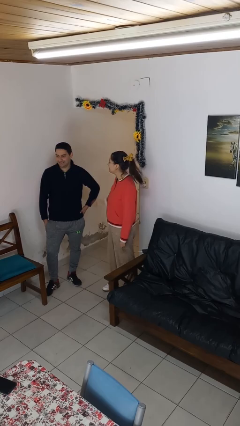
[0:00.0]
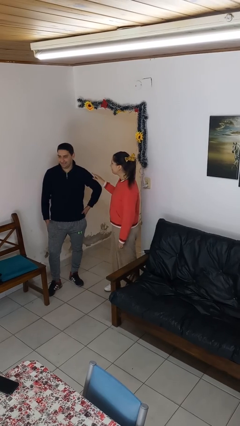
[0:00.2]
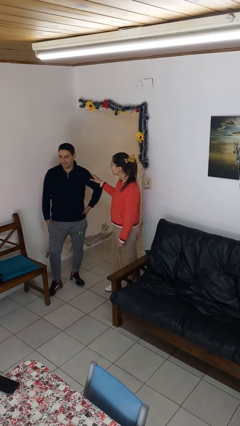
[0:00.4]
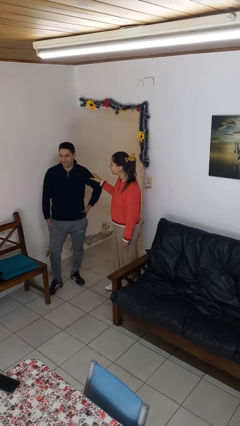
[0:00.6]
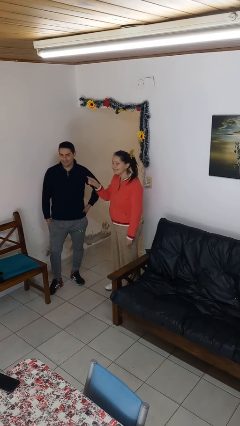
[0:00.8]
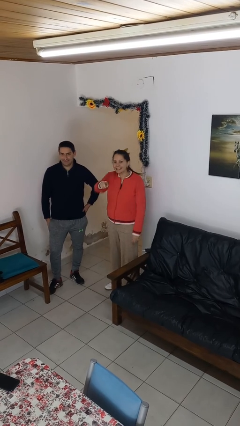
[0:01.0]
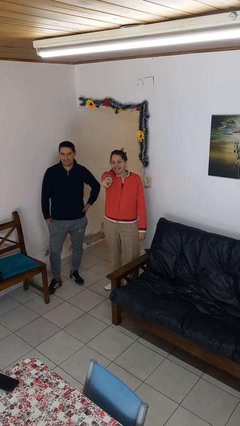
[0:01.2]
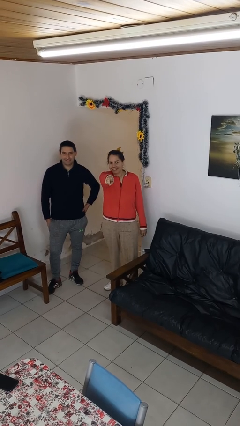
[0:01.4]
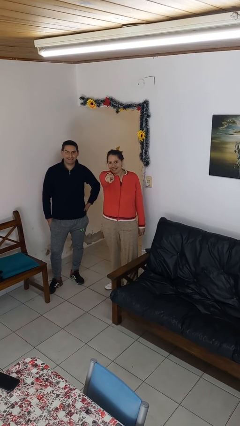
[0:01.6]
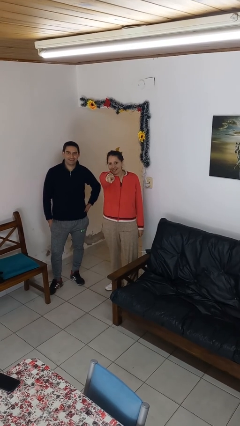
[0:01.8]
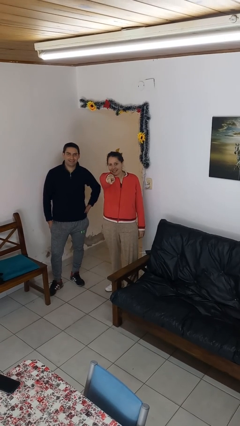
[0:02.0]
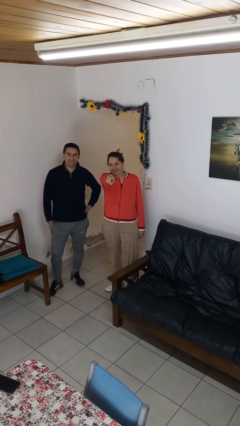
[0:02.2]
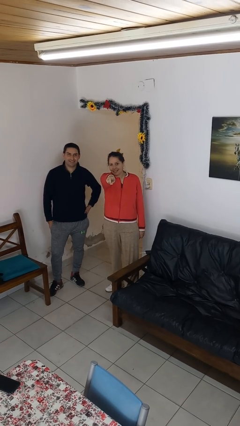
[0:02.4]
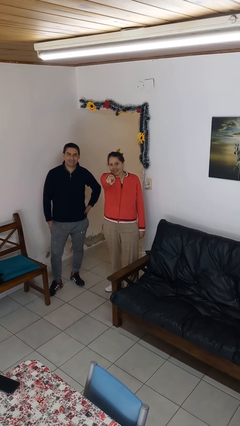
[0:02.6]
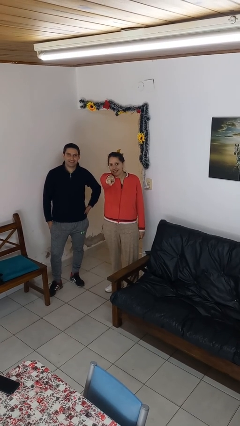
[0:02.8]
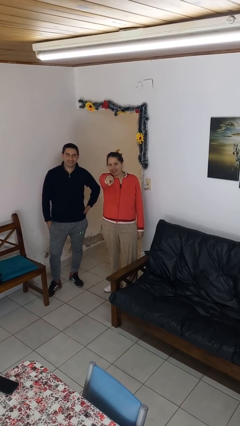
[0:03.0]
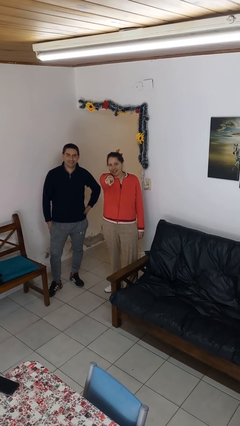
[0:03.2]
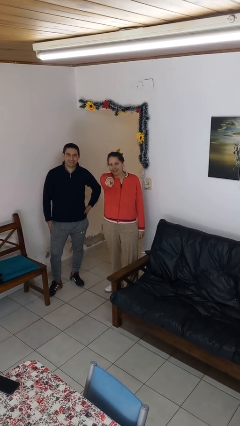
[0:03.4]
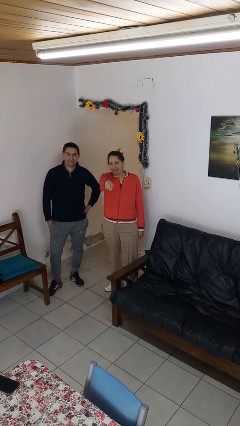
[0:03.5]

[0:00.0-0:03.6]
person points at person

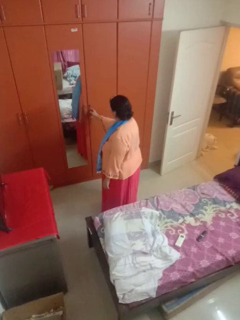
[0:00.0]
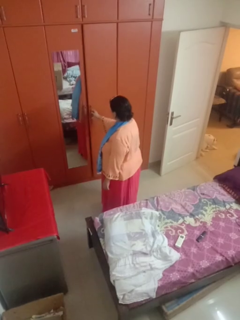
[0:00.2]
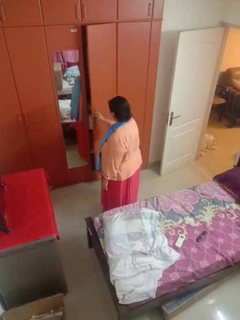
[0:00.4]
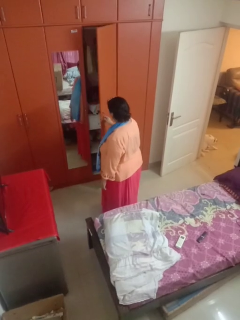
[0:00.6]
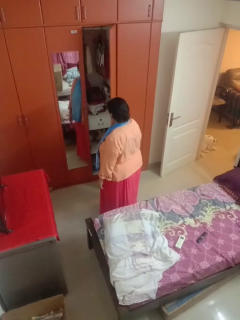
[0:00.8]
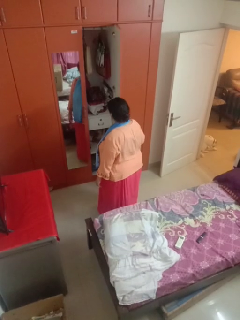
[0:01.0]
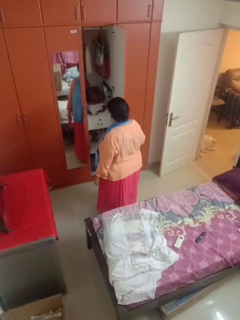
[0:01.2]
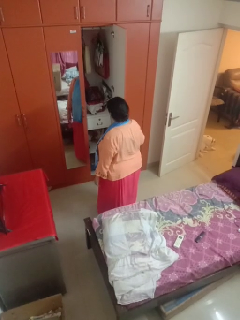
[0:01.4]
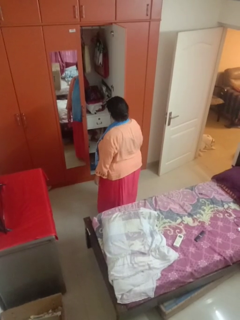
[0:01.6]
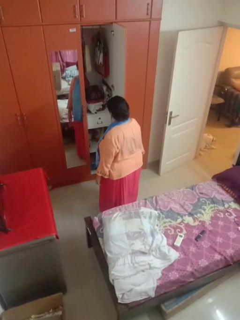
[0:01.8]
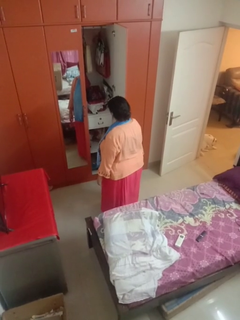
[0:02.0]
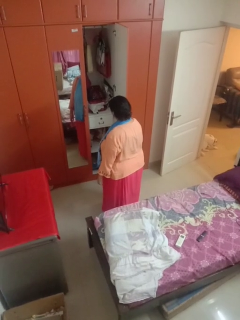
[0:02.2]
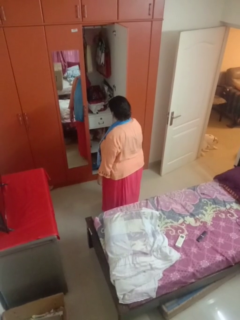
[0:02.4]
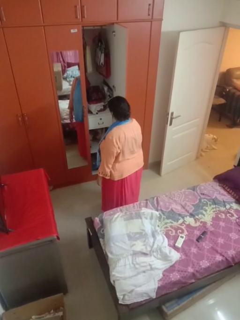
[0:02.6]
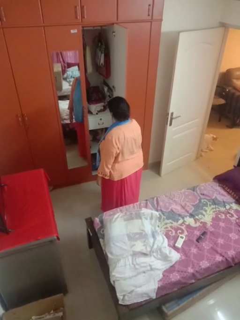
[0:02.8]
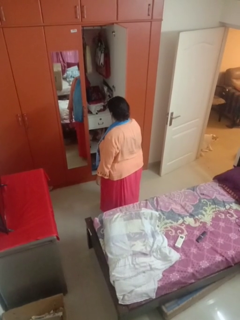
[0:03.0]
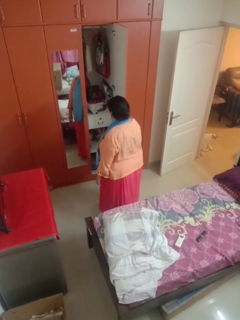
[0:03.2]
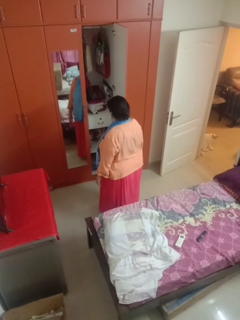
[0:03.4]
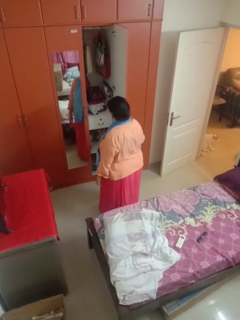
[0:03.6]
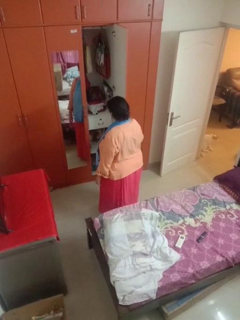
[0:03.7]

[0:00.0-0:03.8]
person opens closet door

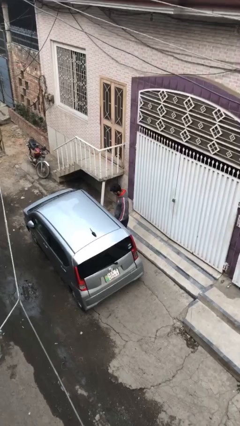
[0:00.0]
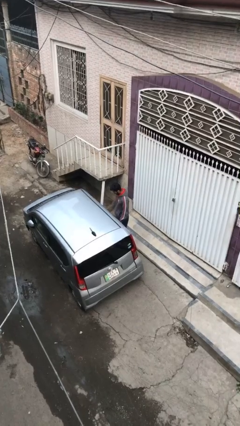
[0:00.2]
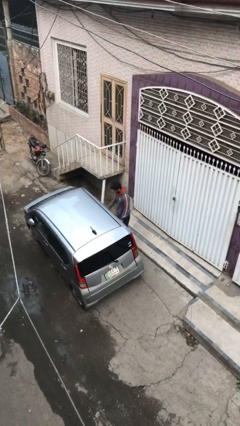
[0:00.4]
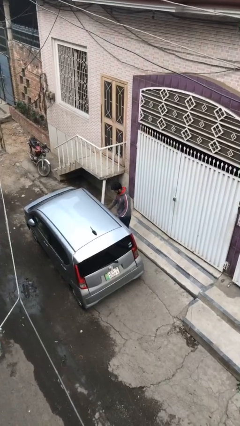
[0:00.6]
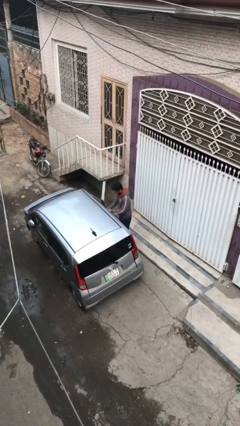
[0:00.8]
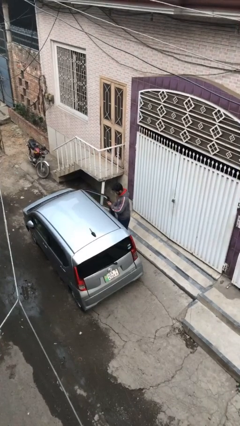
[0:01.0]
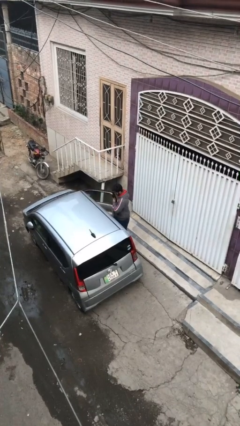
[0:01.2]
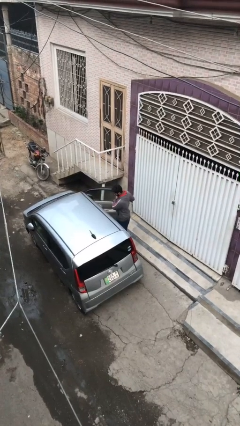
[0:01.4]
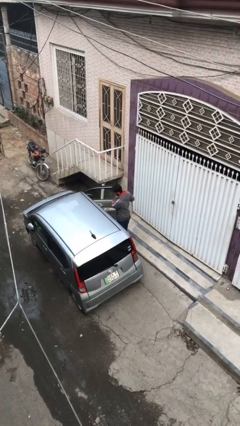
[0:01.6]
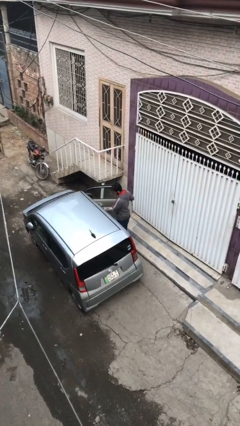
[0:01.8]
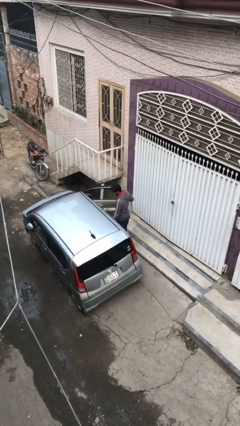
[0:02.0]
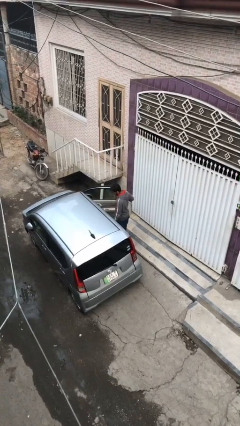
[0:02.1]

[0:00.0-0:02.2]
person opens car door

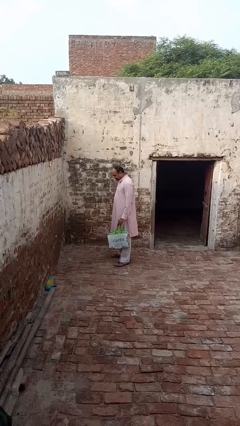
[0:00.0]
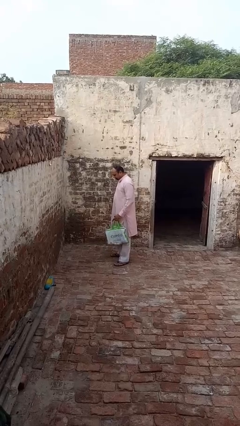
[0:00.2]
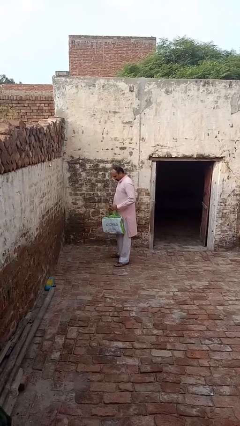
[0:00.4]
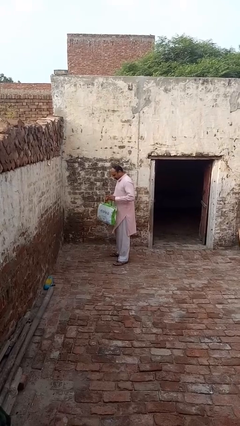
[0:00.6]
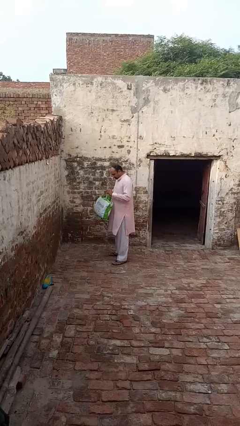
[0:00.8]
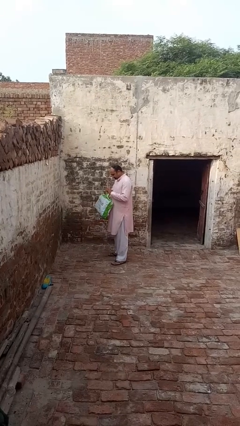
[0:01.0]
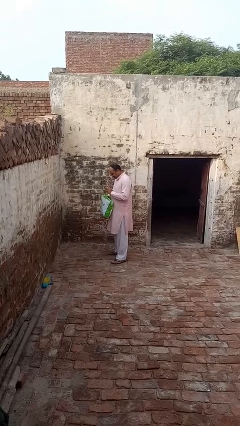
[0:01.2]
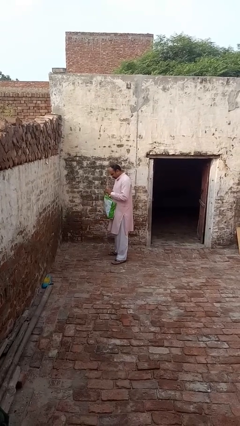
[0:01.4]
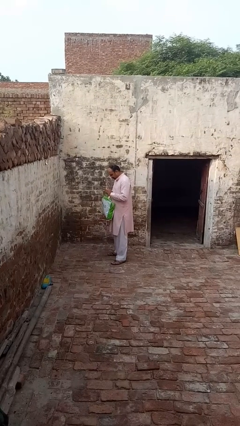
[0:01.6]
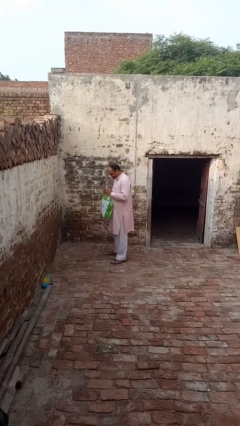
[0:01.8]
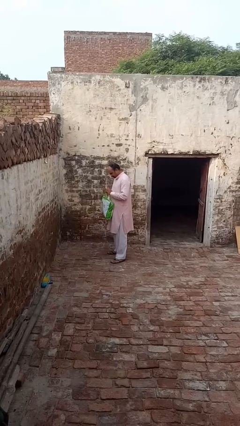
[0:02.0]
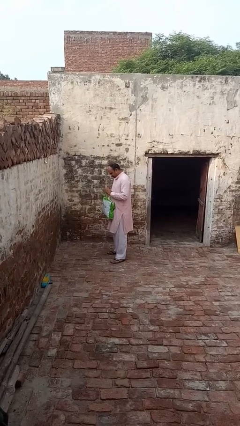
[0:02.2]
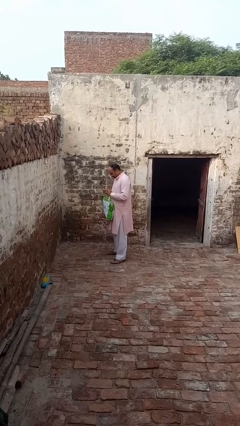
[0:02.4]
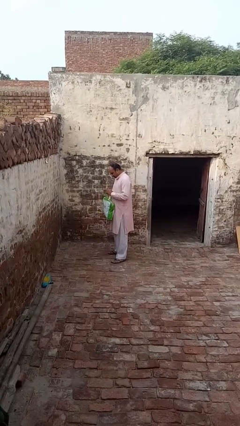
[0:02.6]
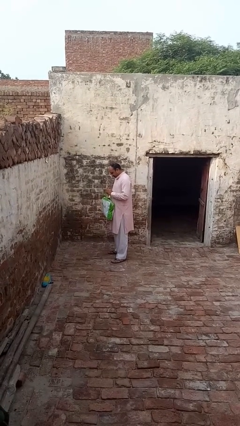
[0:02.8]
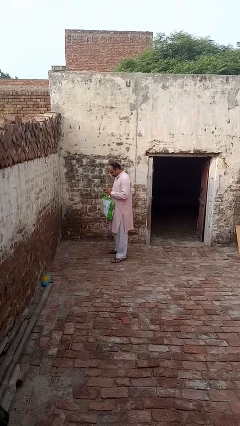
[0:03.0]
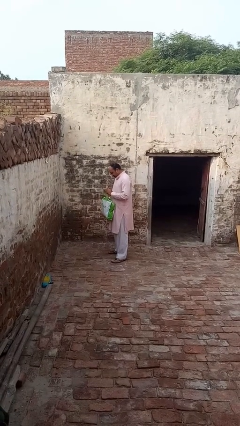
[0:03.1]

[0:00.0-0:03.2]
person searches in bag

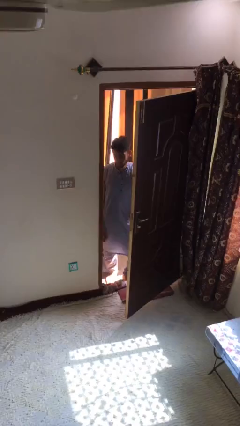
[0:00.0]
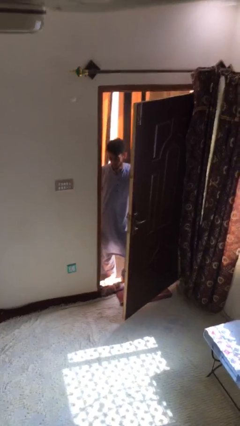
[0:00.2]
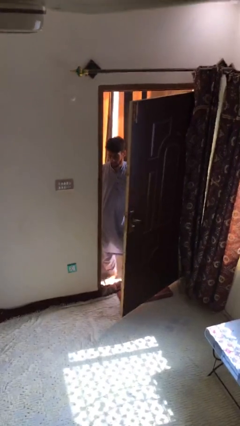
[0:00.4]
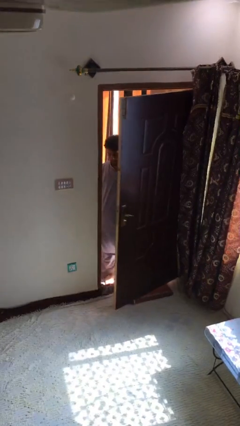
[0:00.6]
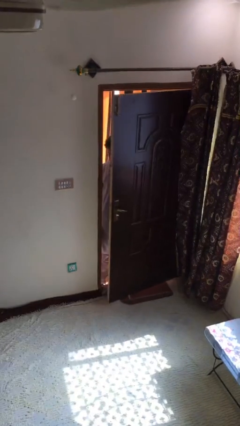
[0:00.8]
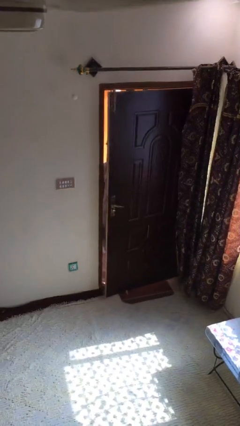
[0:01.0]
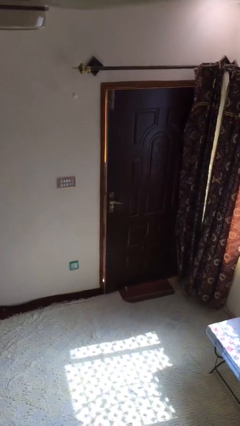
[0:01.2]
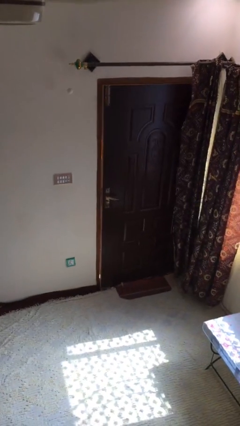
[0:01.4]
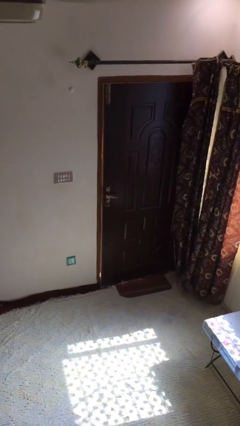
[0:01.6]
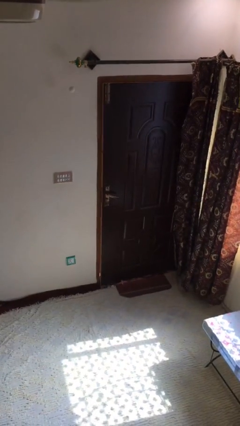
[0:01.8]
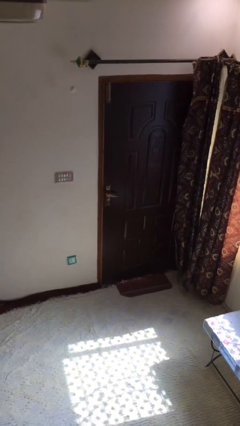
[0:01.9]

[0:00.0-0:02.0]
person closes facility door

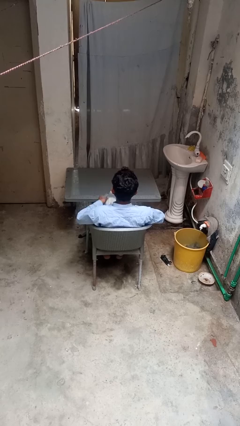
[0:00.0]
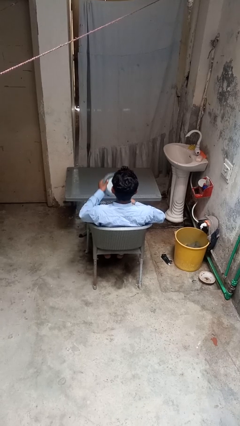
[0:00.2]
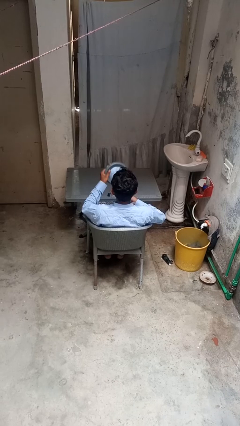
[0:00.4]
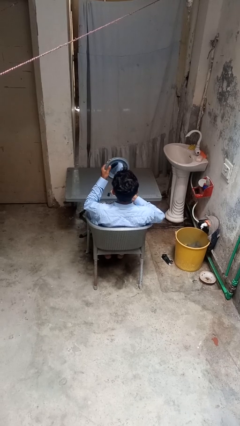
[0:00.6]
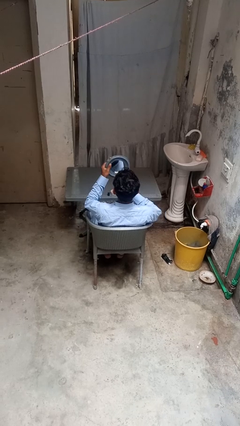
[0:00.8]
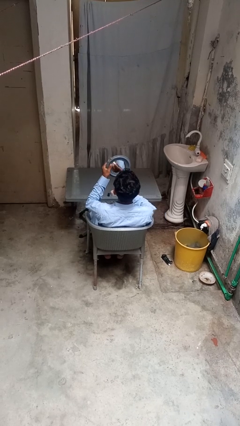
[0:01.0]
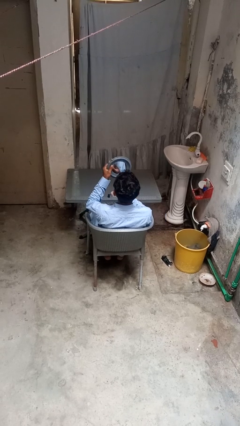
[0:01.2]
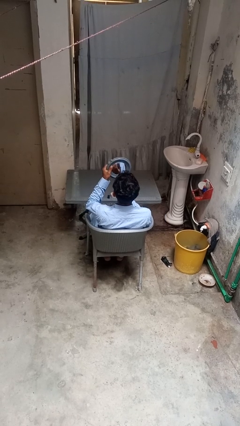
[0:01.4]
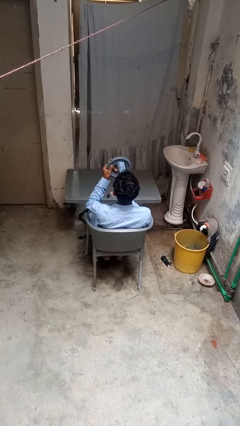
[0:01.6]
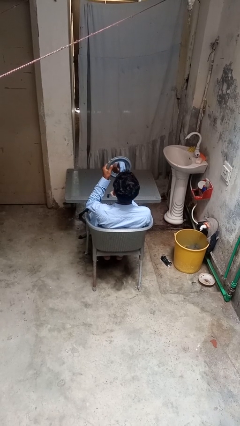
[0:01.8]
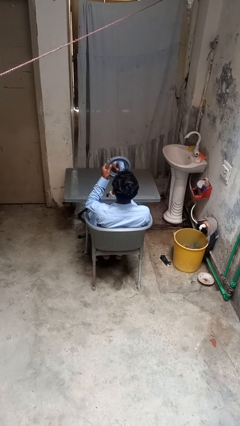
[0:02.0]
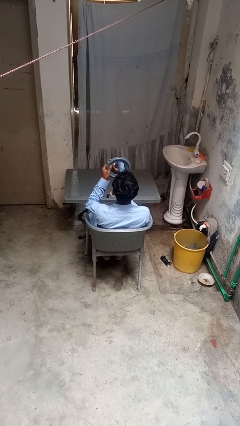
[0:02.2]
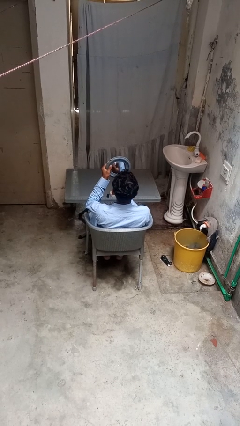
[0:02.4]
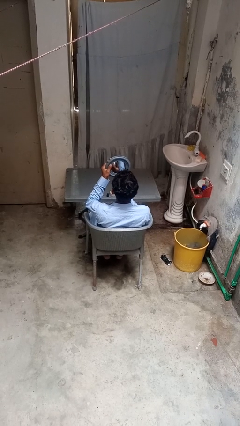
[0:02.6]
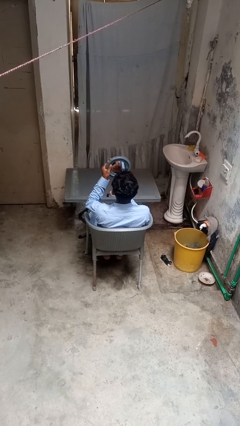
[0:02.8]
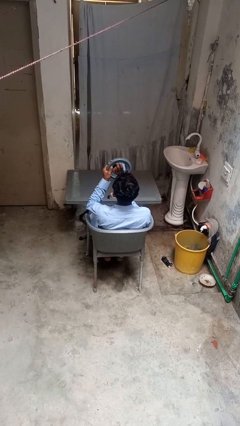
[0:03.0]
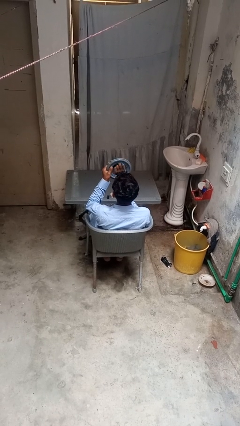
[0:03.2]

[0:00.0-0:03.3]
person applies lip makeup

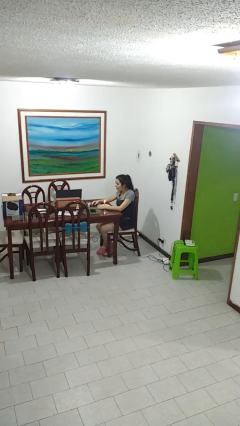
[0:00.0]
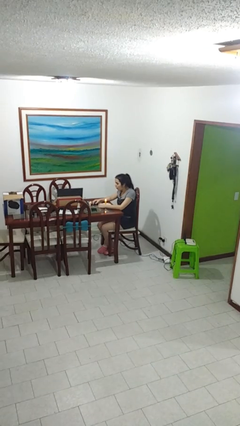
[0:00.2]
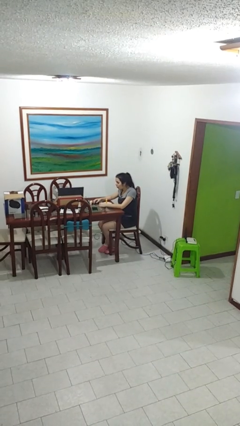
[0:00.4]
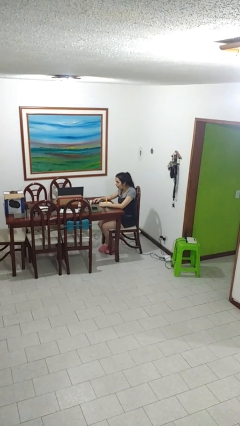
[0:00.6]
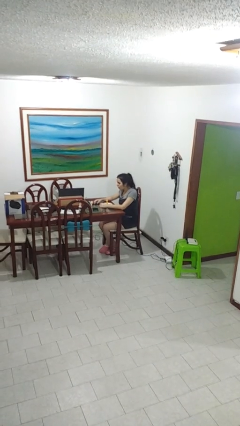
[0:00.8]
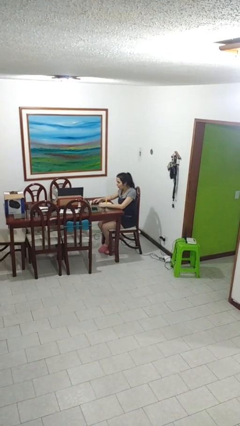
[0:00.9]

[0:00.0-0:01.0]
person extinguishes candle
